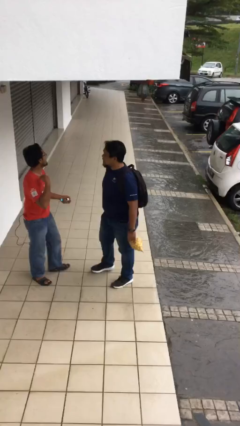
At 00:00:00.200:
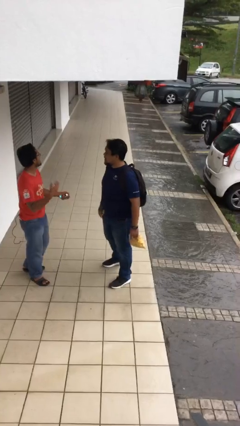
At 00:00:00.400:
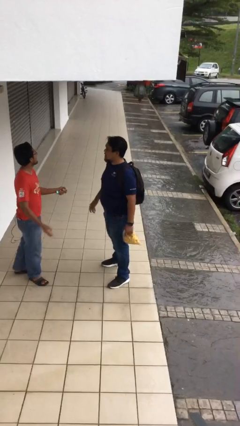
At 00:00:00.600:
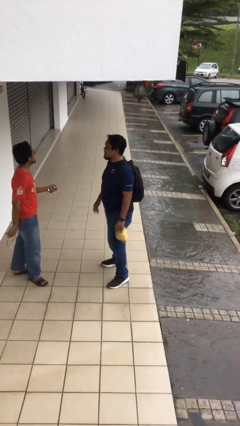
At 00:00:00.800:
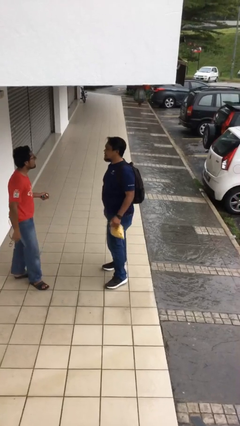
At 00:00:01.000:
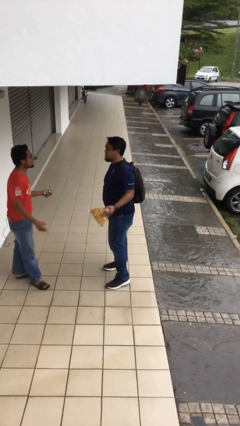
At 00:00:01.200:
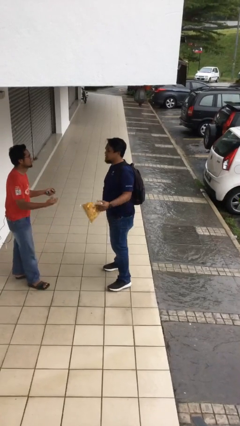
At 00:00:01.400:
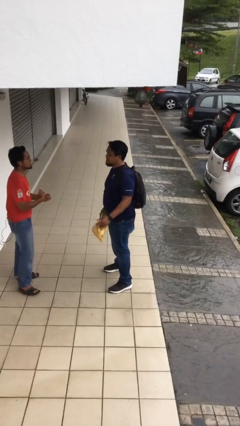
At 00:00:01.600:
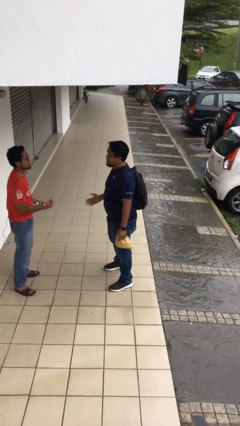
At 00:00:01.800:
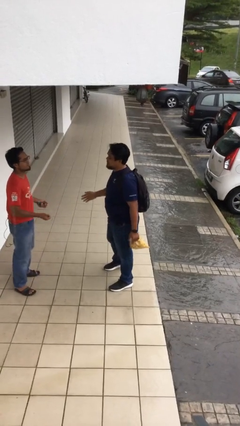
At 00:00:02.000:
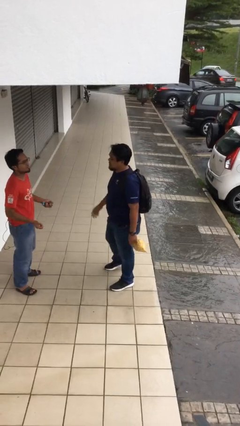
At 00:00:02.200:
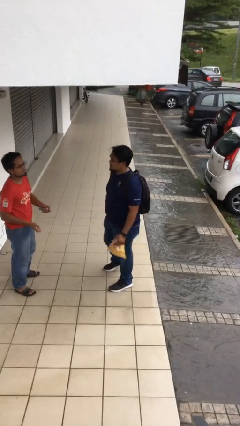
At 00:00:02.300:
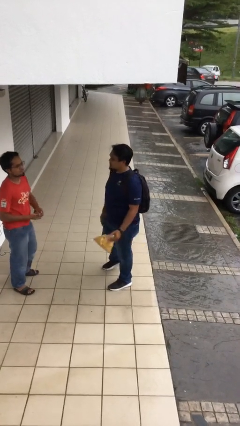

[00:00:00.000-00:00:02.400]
person talks to person

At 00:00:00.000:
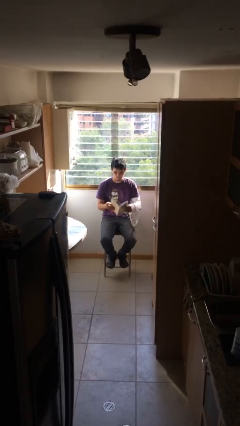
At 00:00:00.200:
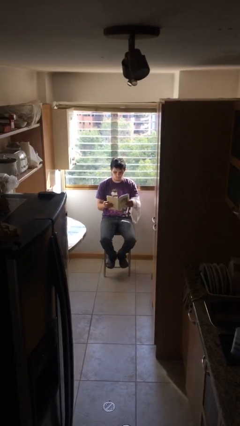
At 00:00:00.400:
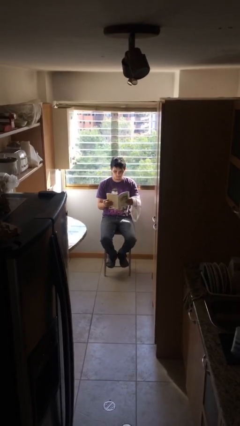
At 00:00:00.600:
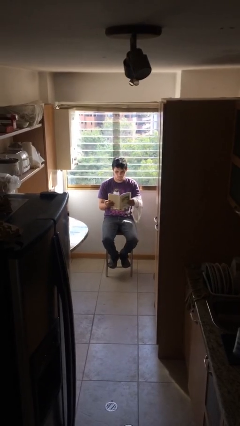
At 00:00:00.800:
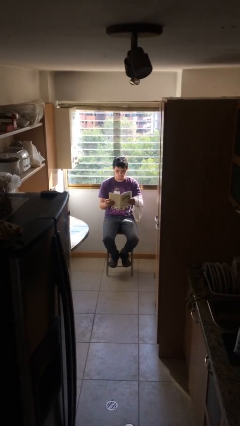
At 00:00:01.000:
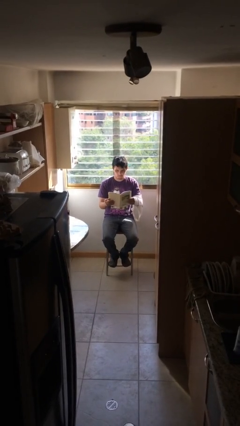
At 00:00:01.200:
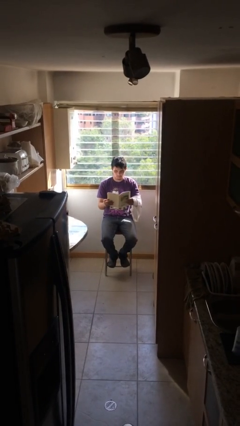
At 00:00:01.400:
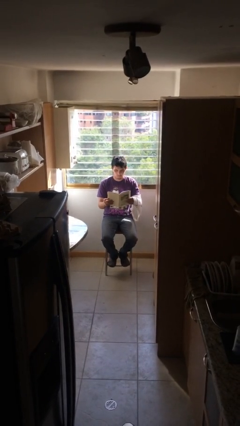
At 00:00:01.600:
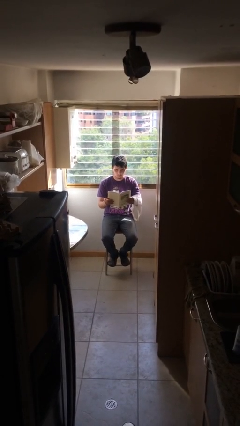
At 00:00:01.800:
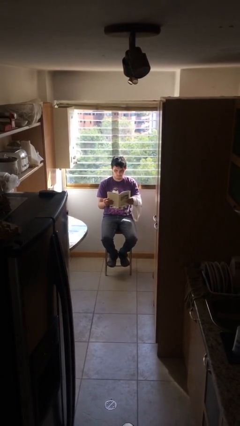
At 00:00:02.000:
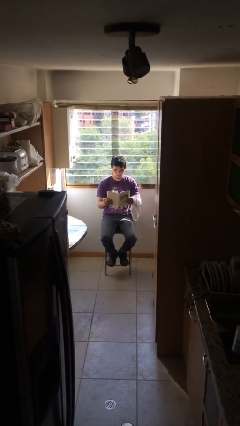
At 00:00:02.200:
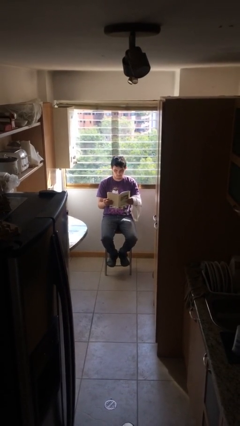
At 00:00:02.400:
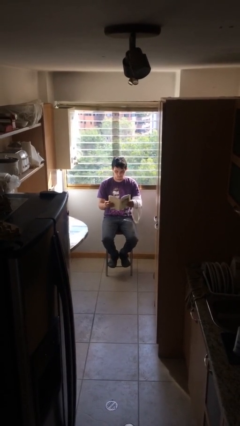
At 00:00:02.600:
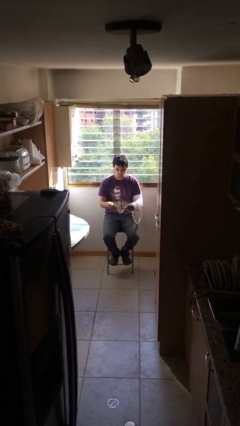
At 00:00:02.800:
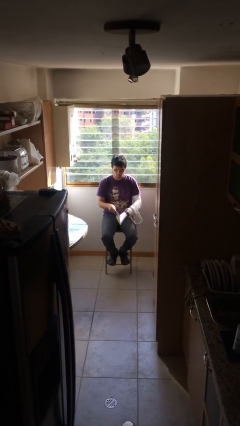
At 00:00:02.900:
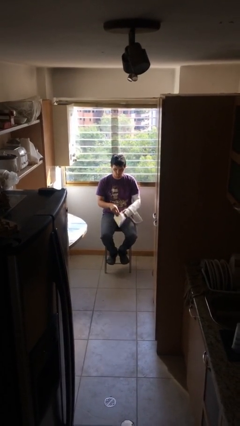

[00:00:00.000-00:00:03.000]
person reads document

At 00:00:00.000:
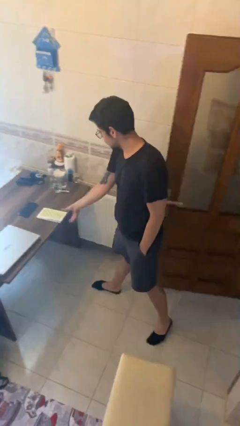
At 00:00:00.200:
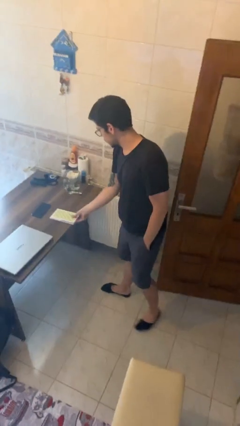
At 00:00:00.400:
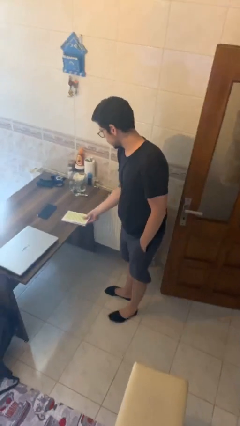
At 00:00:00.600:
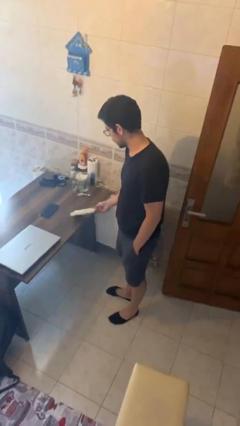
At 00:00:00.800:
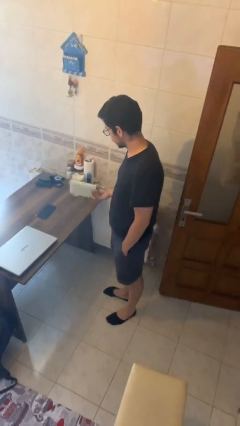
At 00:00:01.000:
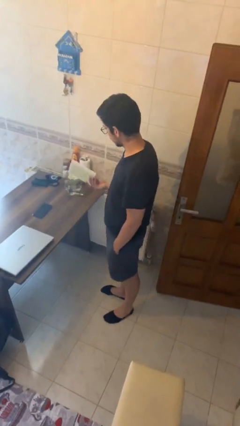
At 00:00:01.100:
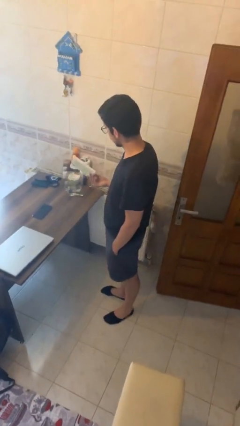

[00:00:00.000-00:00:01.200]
person picks up object from table

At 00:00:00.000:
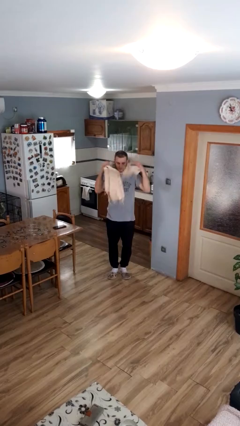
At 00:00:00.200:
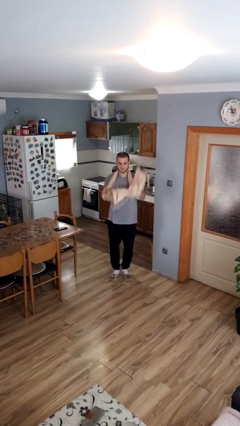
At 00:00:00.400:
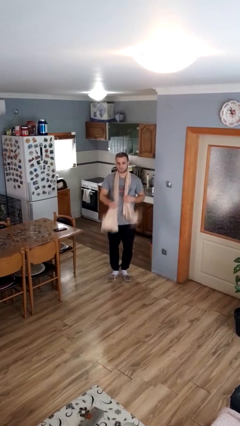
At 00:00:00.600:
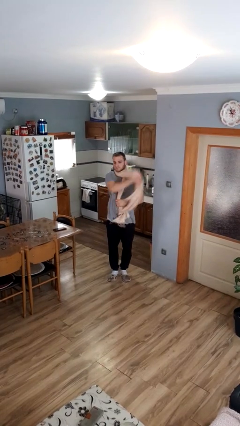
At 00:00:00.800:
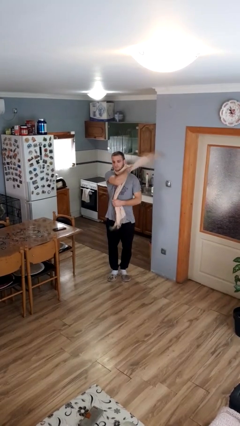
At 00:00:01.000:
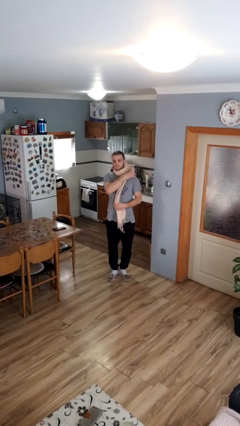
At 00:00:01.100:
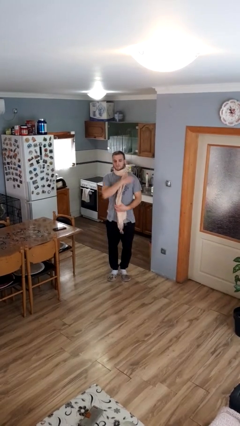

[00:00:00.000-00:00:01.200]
person puts on scarf

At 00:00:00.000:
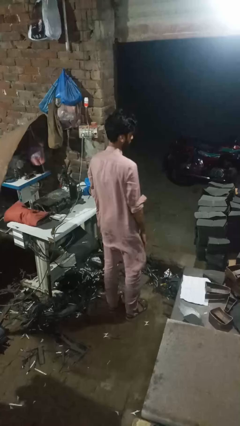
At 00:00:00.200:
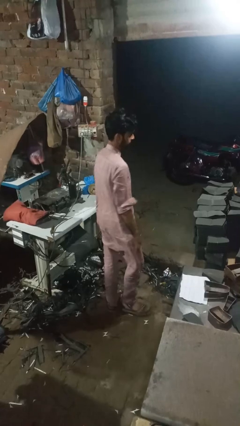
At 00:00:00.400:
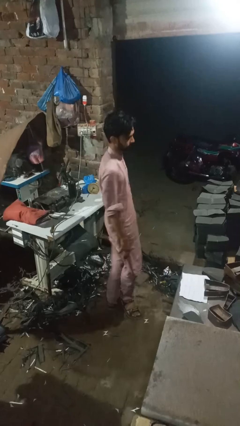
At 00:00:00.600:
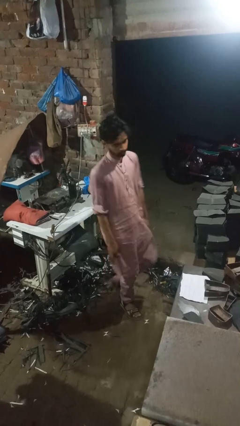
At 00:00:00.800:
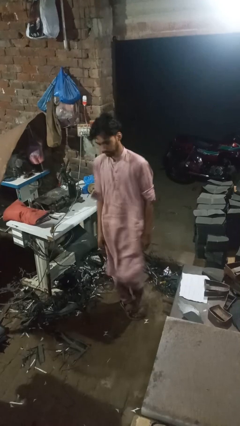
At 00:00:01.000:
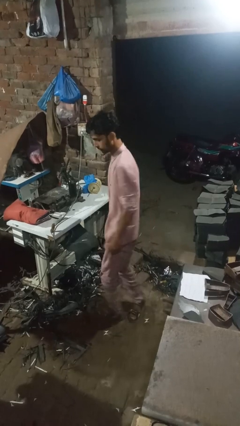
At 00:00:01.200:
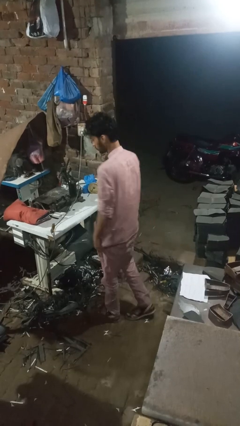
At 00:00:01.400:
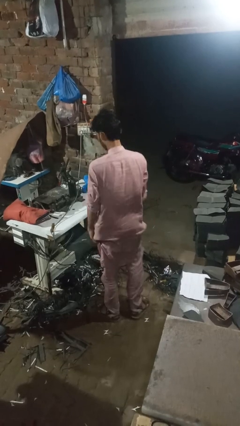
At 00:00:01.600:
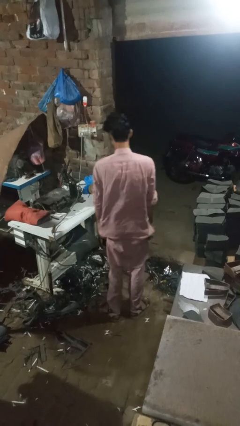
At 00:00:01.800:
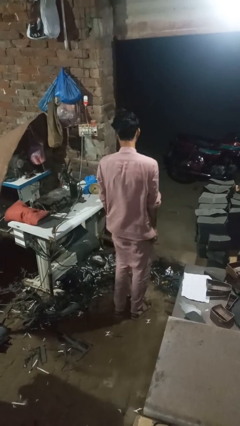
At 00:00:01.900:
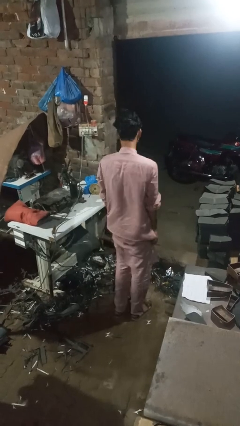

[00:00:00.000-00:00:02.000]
person twirls

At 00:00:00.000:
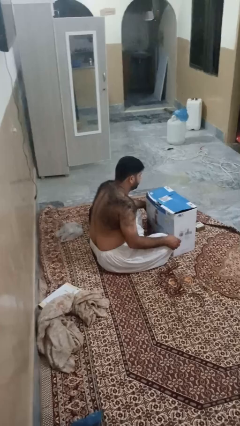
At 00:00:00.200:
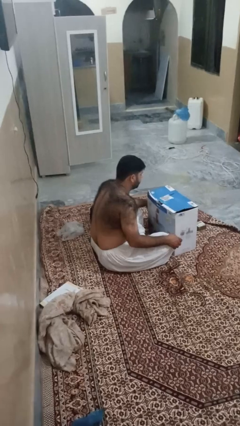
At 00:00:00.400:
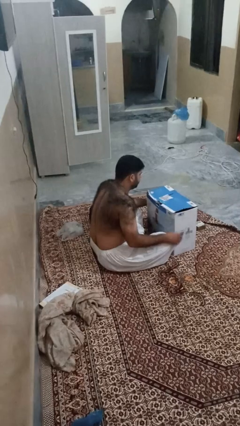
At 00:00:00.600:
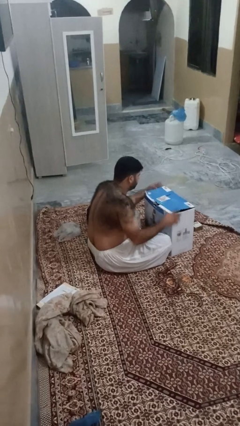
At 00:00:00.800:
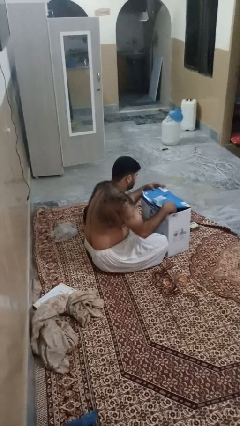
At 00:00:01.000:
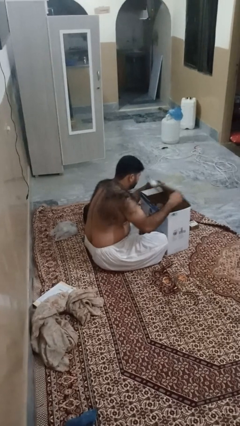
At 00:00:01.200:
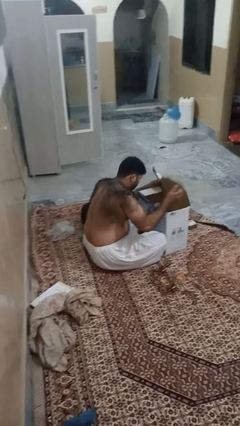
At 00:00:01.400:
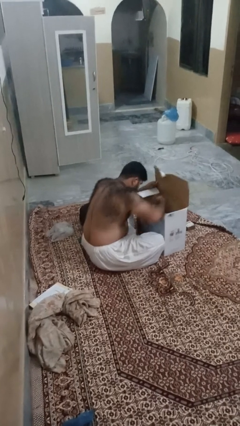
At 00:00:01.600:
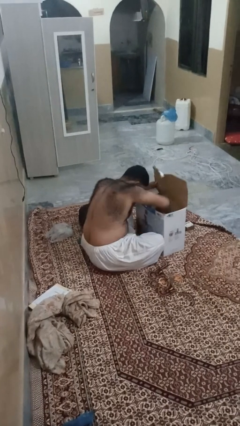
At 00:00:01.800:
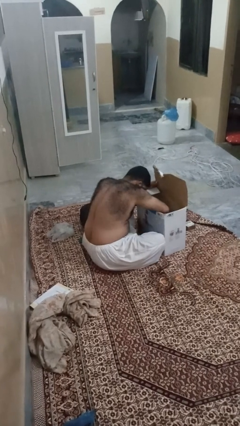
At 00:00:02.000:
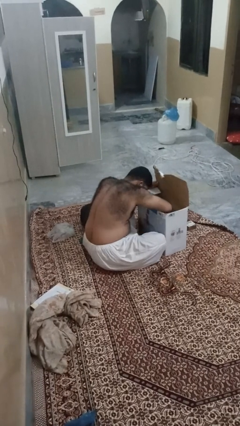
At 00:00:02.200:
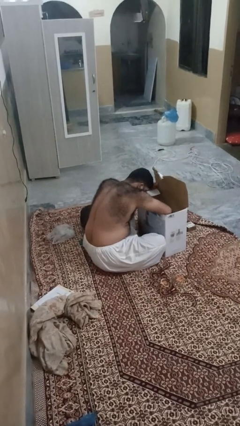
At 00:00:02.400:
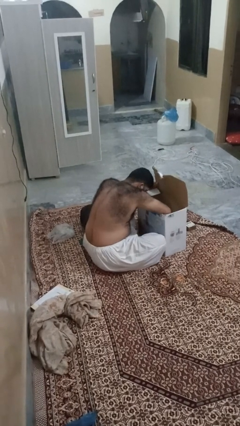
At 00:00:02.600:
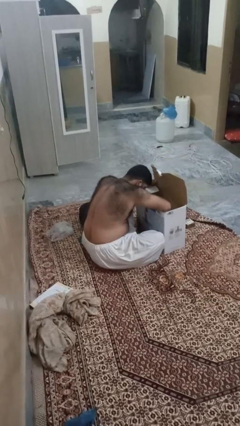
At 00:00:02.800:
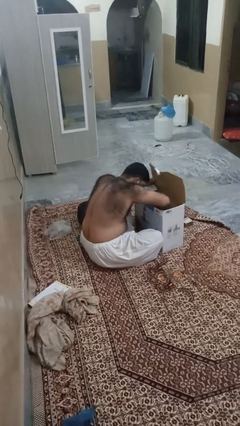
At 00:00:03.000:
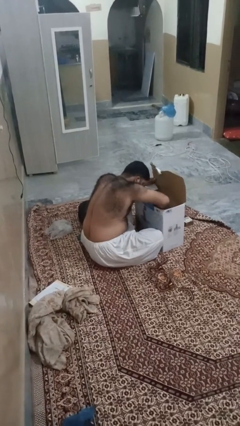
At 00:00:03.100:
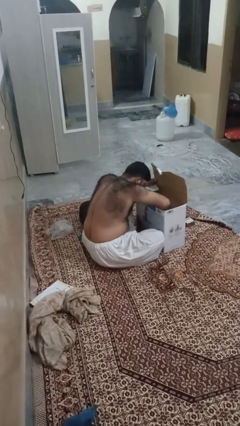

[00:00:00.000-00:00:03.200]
person searches in box

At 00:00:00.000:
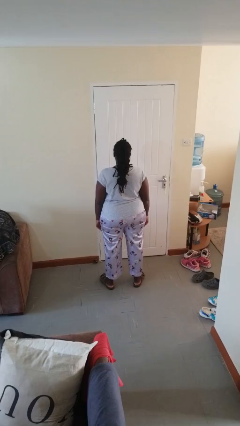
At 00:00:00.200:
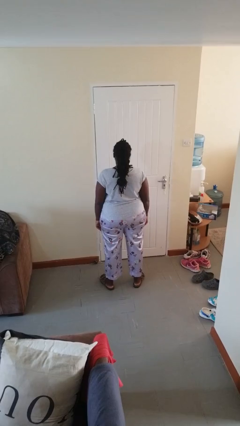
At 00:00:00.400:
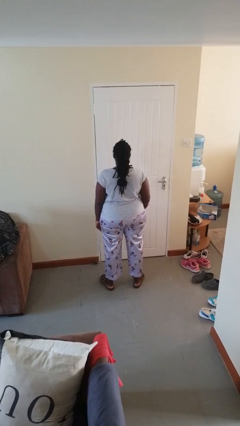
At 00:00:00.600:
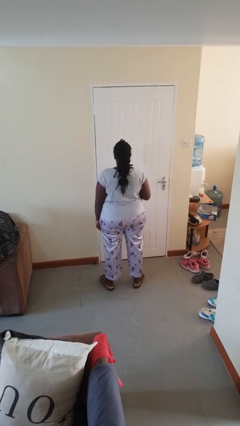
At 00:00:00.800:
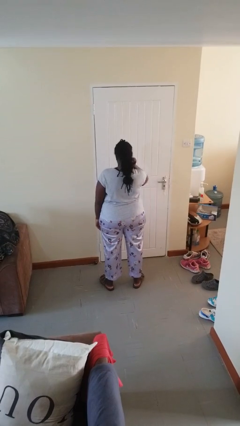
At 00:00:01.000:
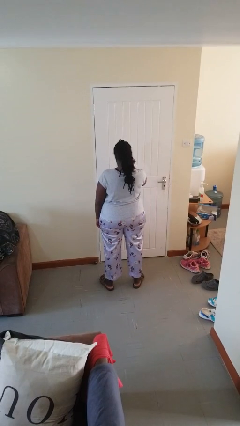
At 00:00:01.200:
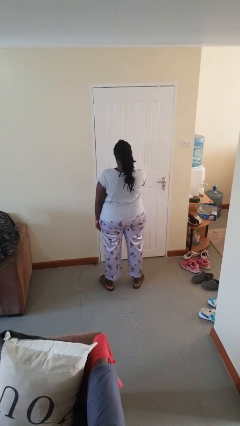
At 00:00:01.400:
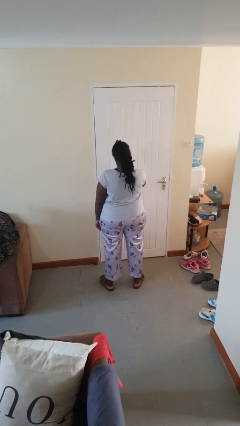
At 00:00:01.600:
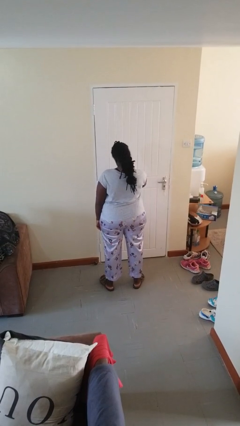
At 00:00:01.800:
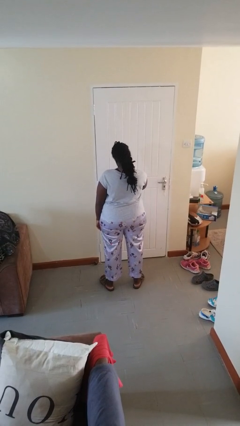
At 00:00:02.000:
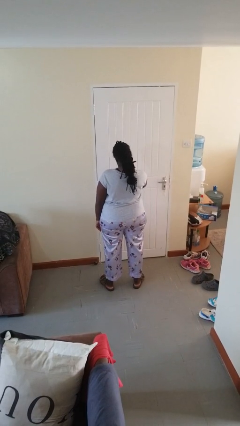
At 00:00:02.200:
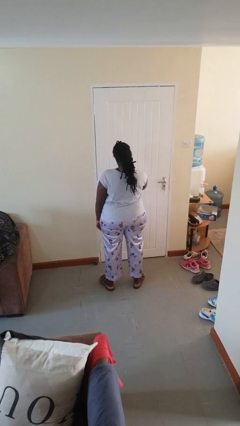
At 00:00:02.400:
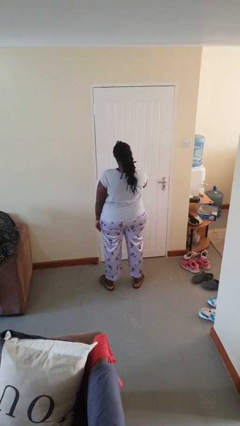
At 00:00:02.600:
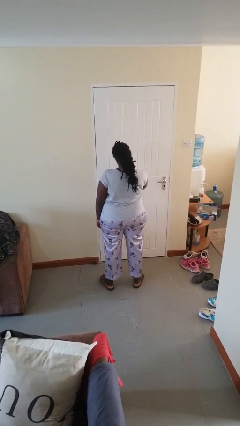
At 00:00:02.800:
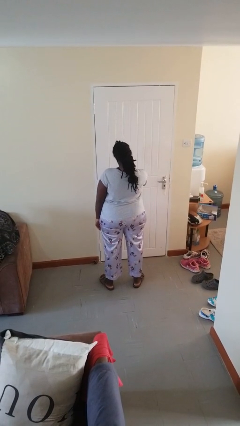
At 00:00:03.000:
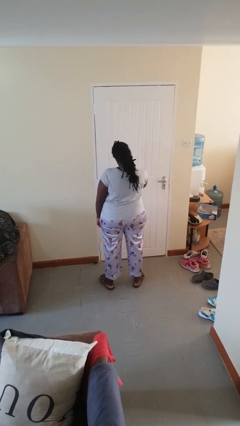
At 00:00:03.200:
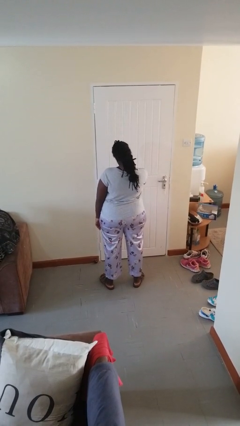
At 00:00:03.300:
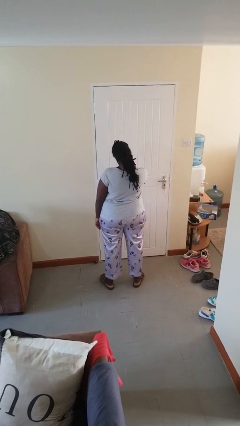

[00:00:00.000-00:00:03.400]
person scratches face

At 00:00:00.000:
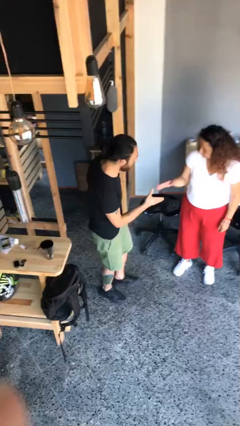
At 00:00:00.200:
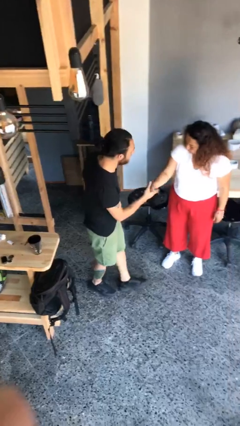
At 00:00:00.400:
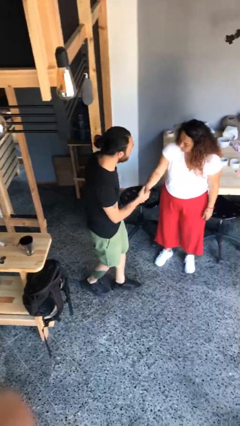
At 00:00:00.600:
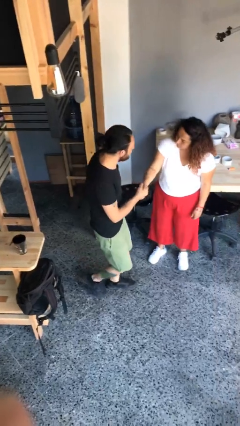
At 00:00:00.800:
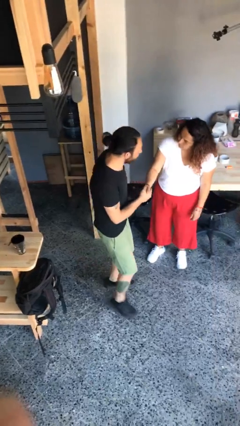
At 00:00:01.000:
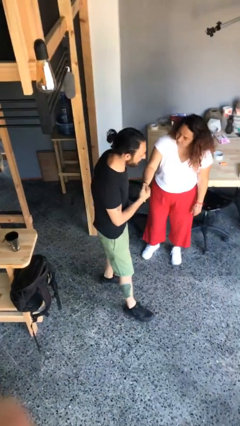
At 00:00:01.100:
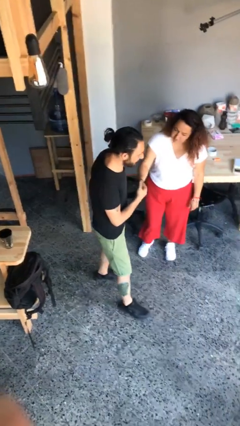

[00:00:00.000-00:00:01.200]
person shakes hand
